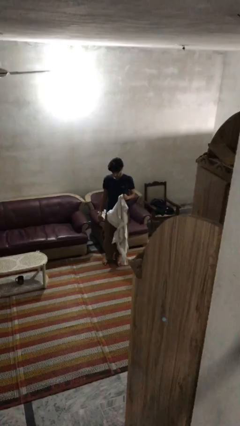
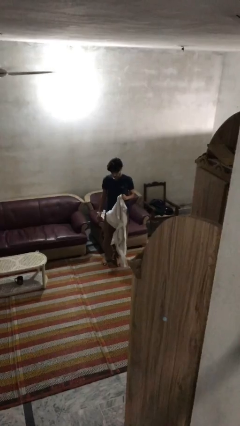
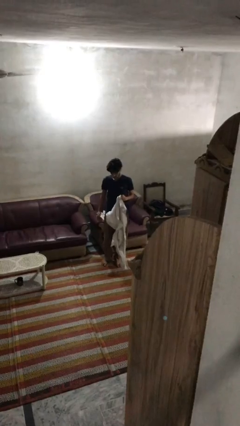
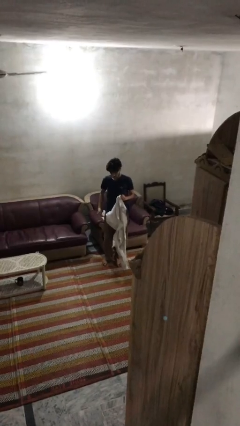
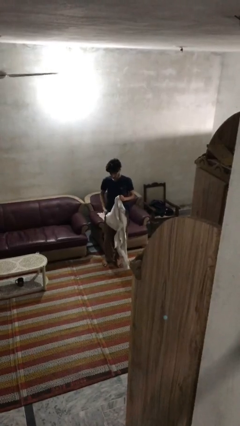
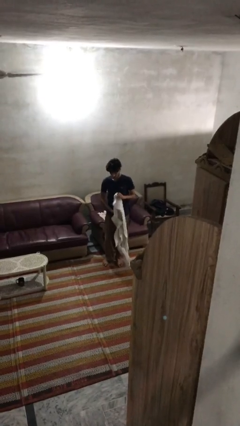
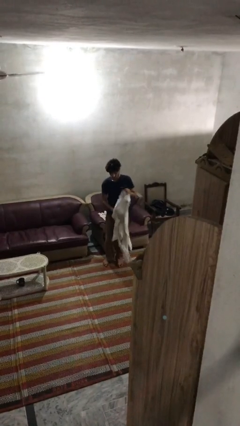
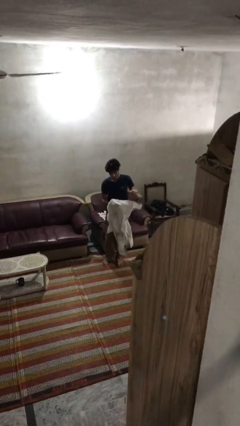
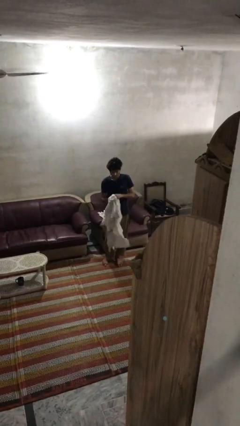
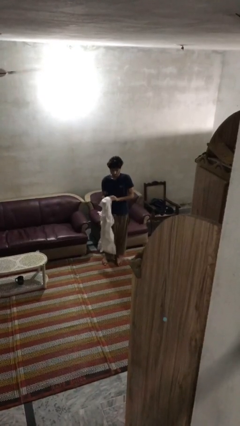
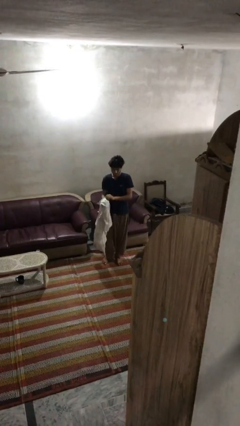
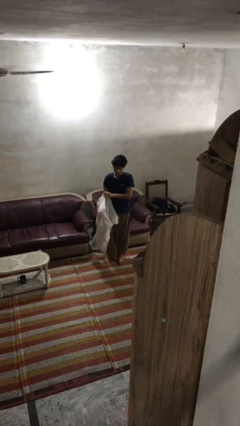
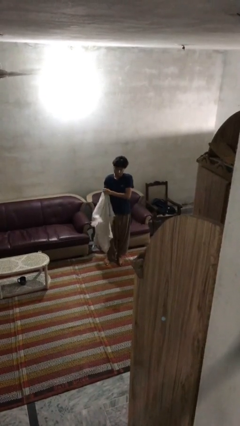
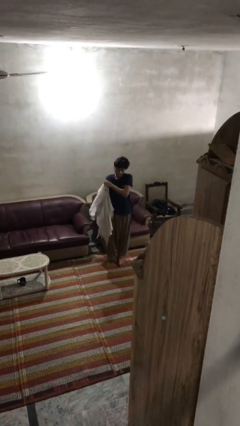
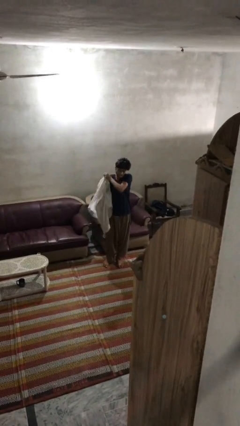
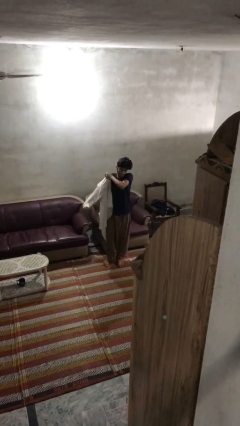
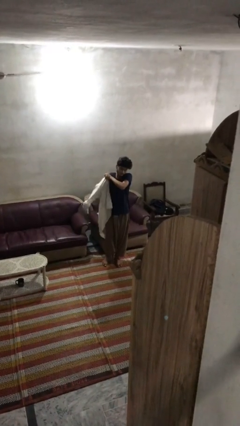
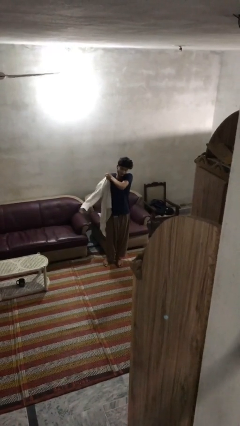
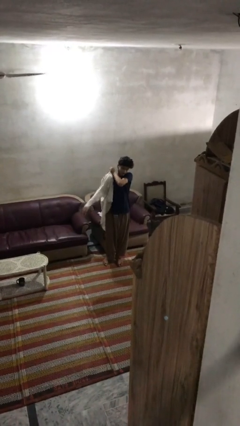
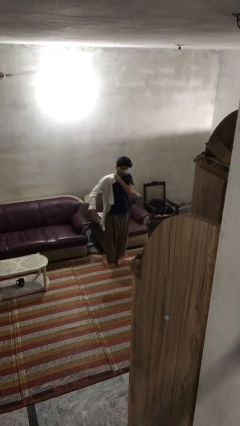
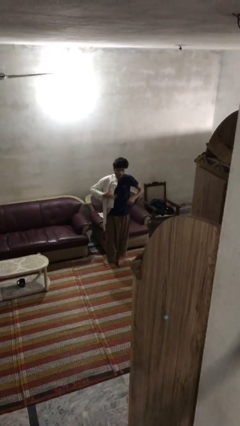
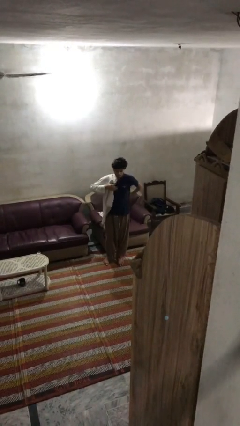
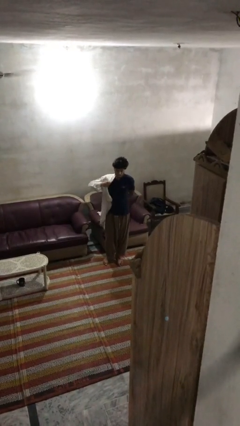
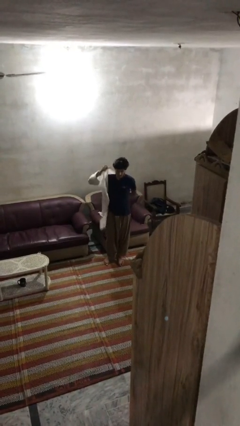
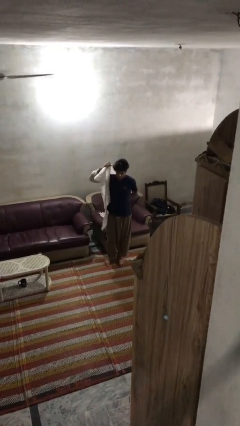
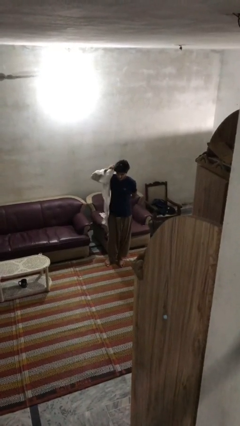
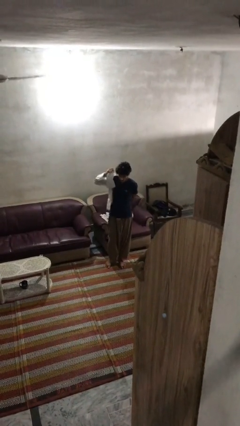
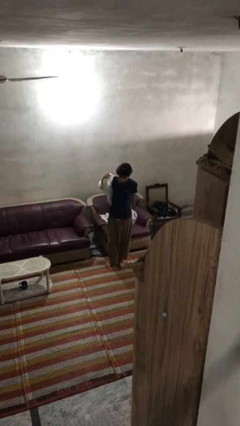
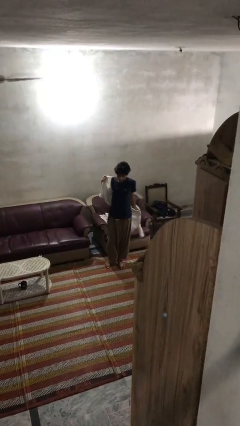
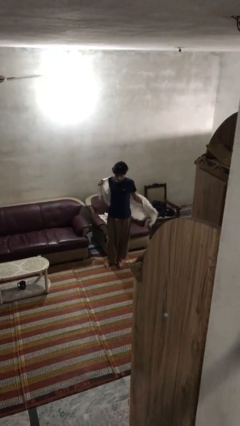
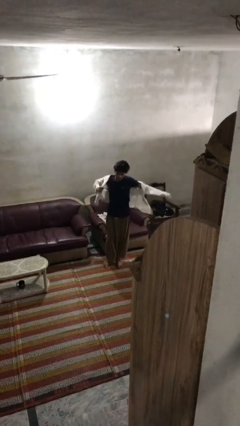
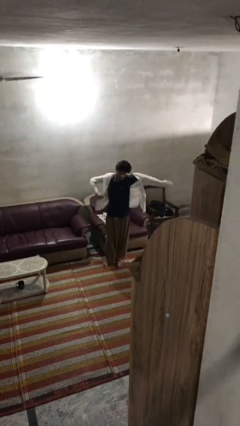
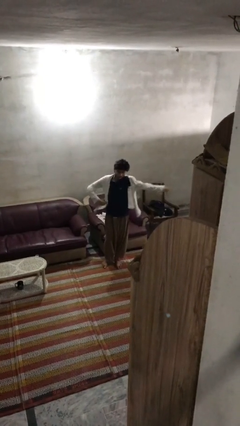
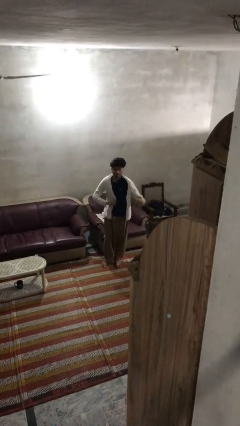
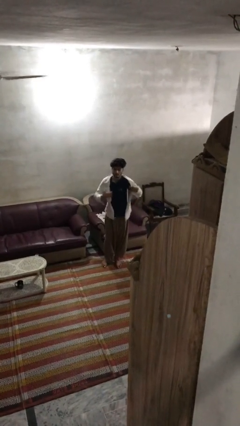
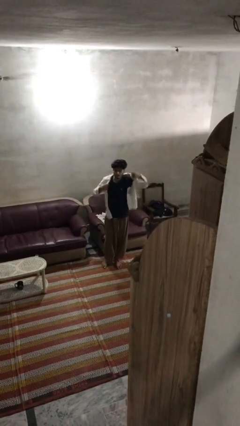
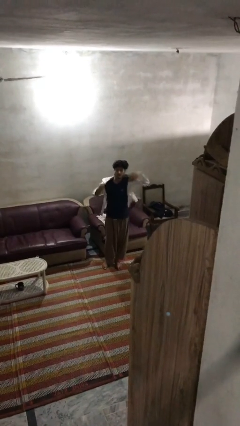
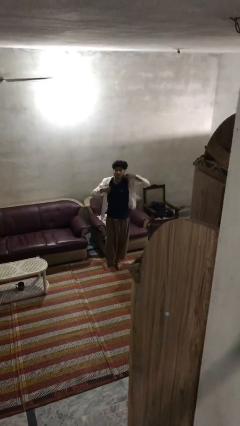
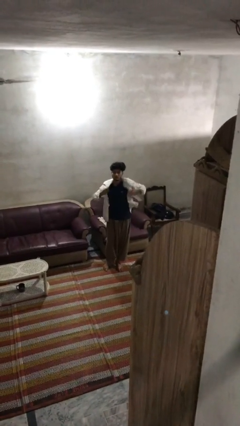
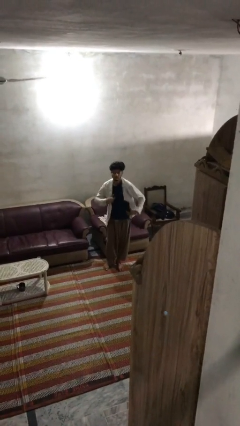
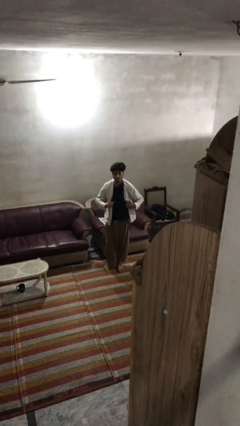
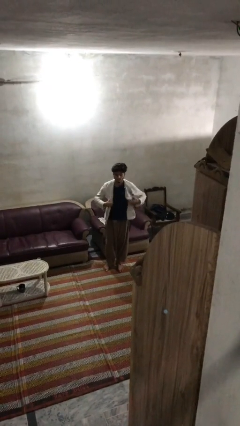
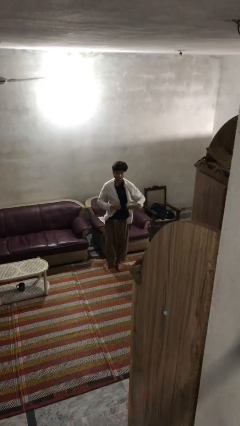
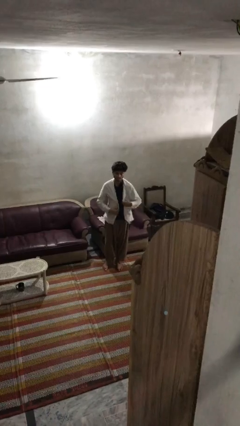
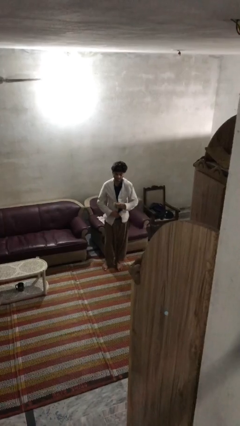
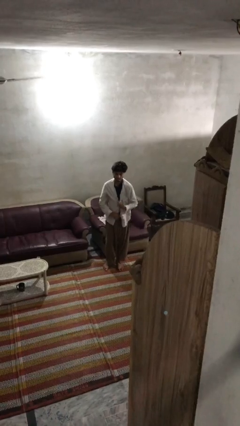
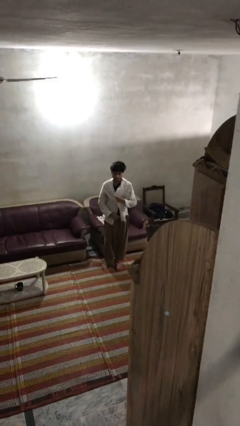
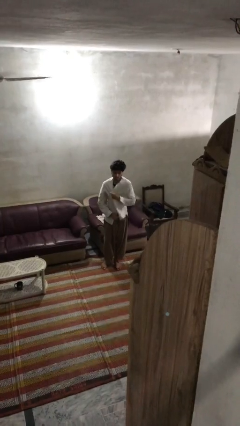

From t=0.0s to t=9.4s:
person puts on shirt

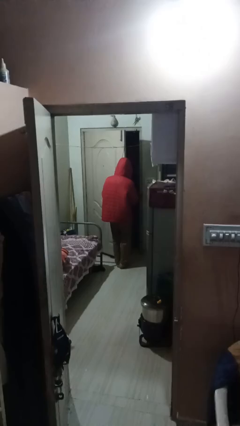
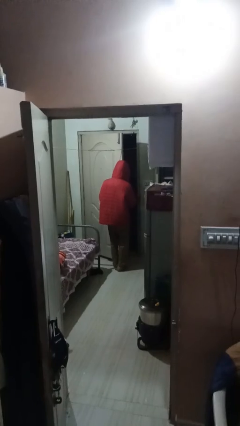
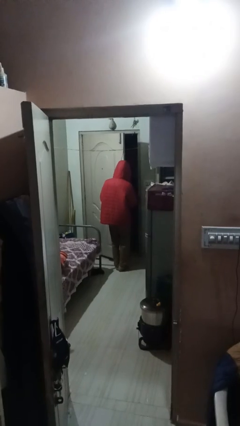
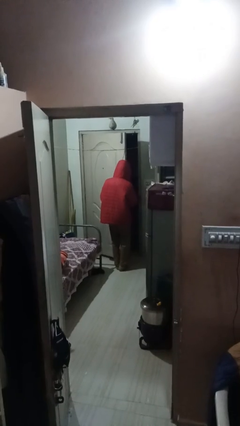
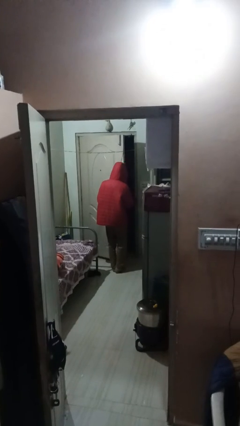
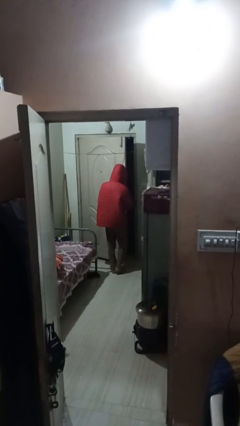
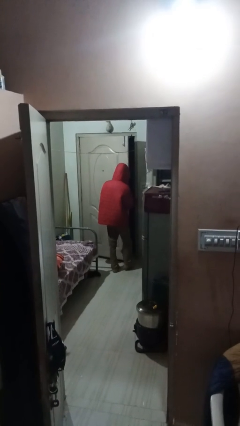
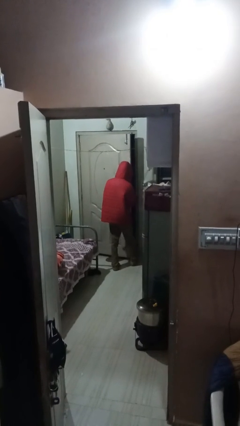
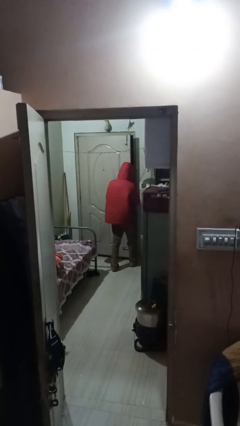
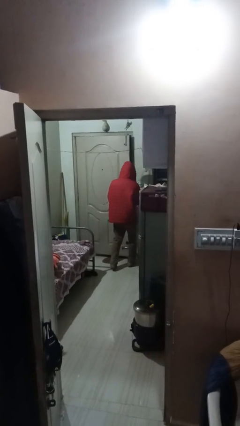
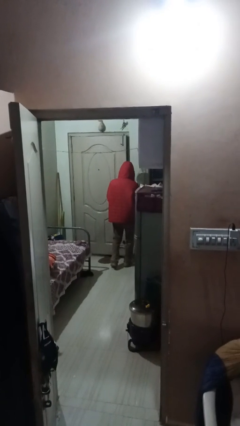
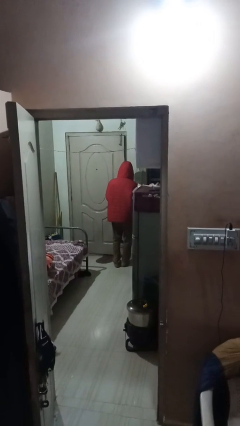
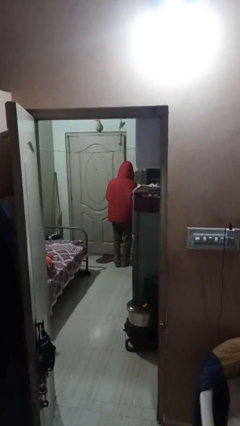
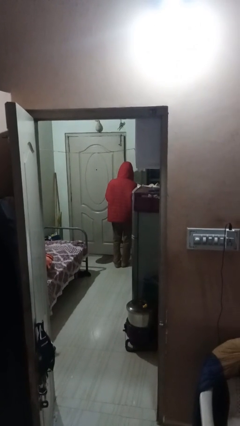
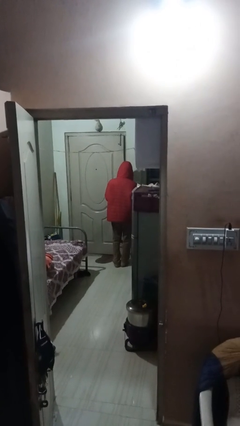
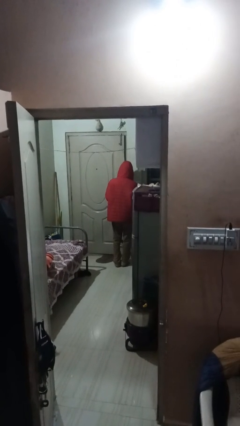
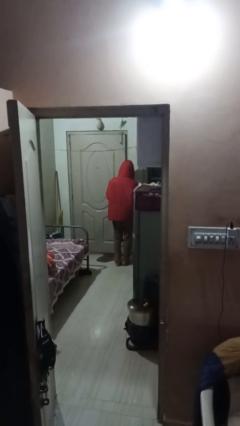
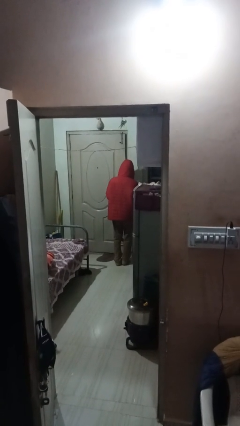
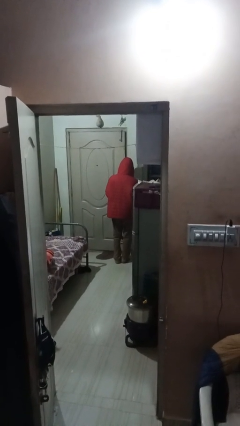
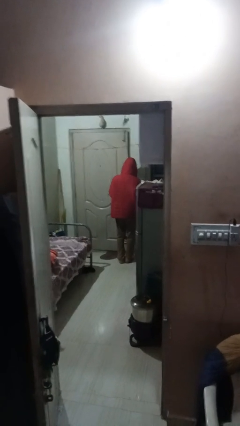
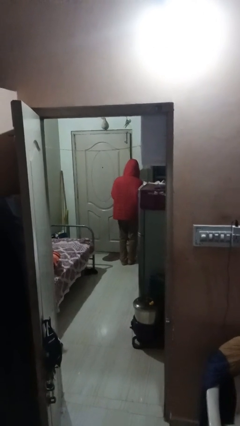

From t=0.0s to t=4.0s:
person closes facility door

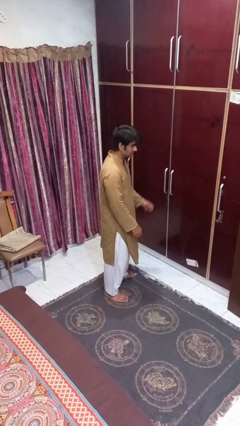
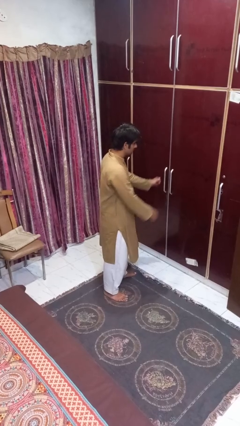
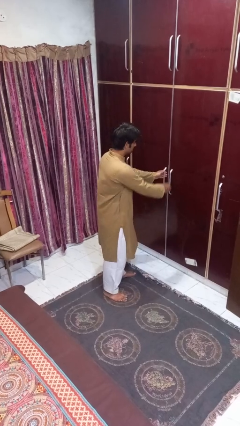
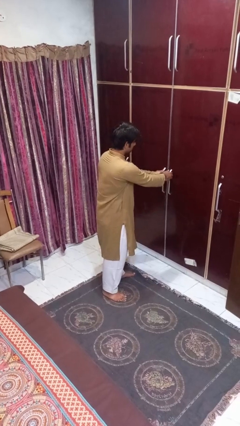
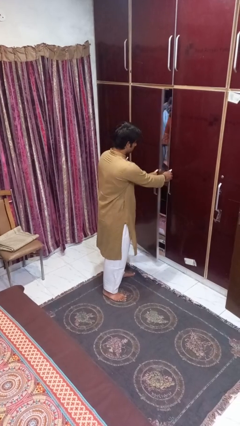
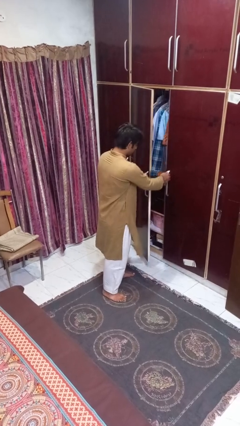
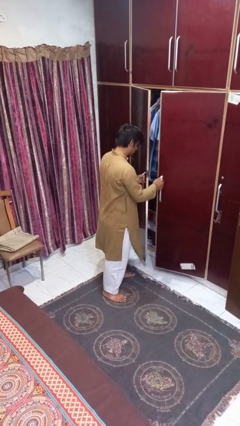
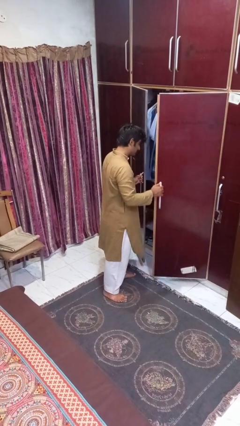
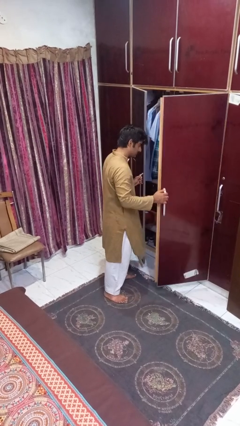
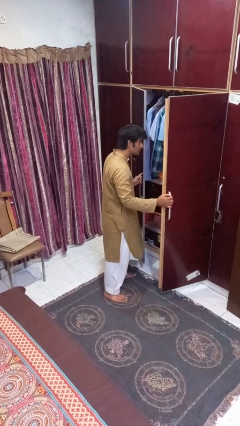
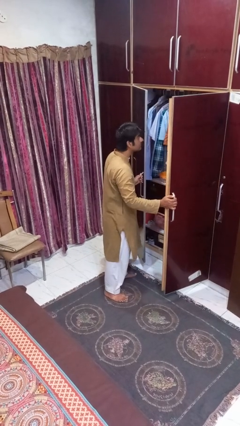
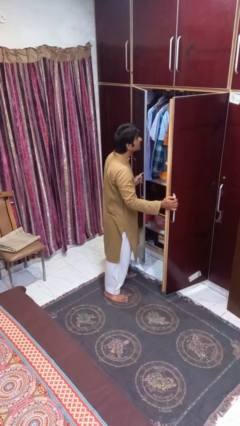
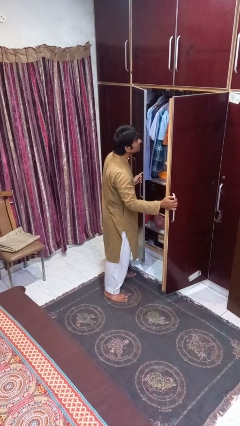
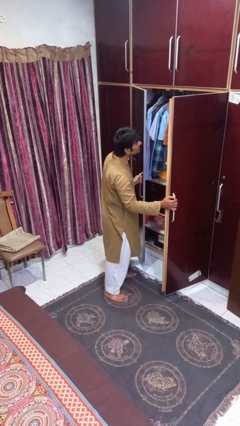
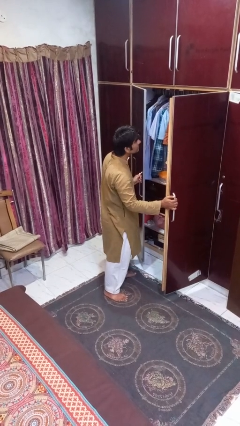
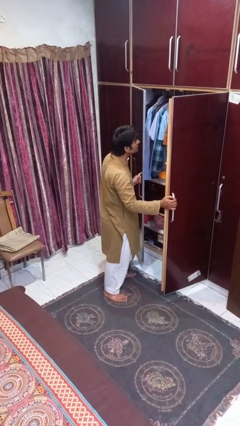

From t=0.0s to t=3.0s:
person opens closet door

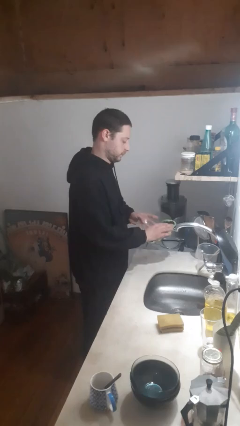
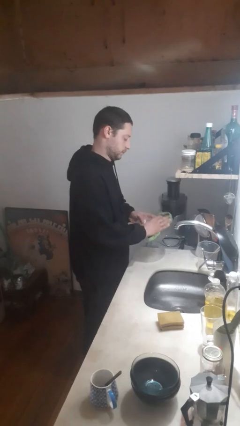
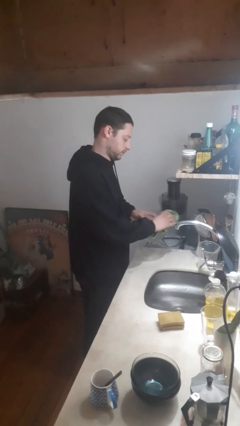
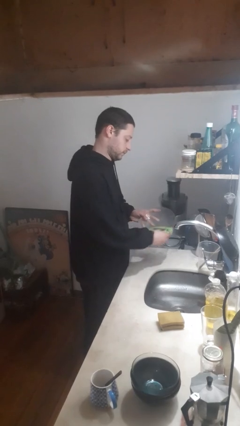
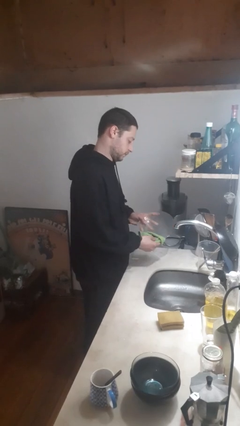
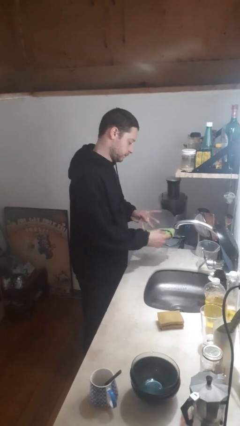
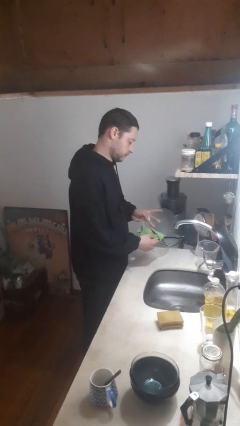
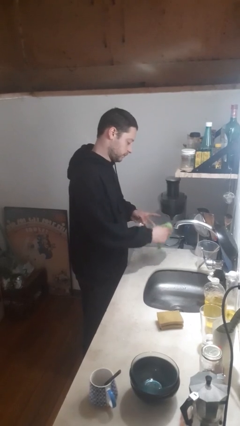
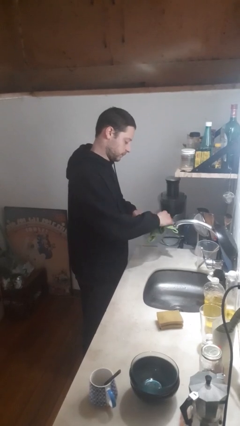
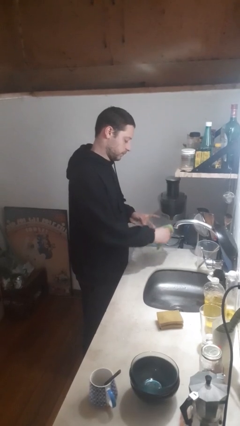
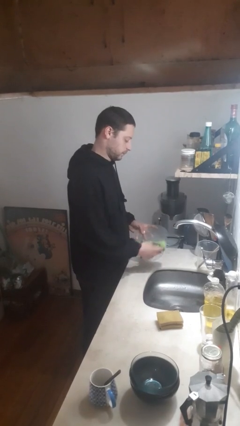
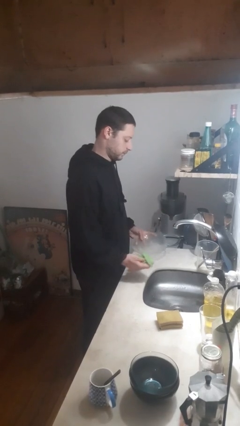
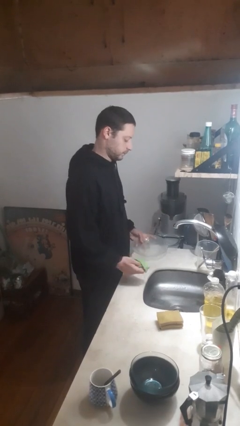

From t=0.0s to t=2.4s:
person dries dish
